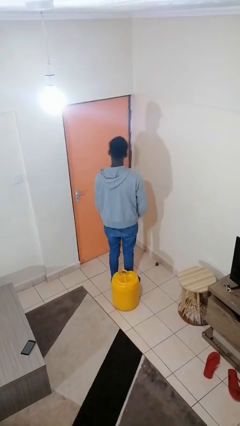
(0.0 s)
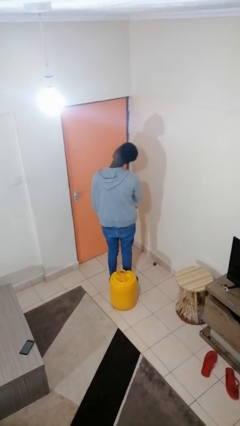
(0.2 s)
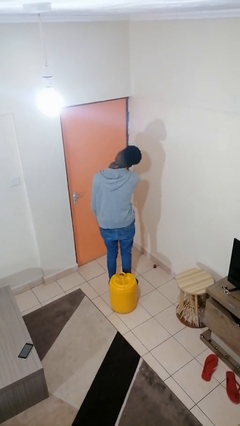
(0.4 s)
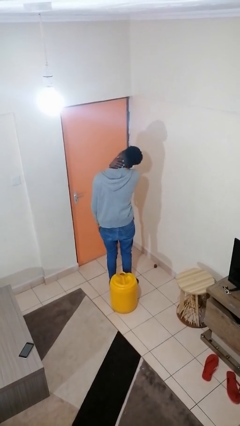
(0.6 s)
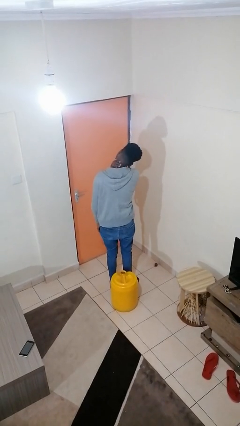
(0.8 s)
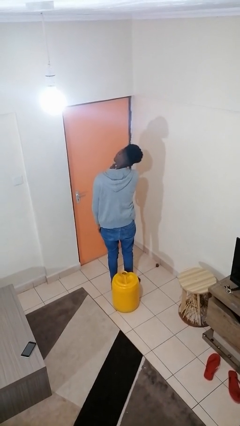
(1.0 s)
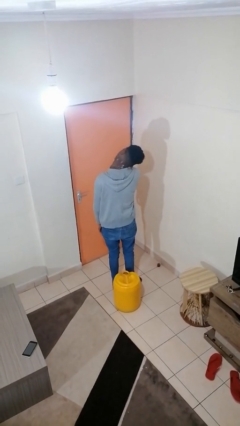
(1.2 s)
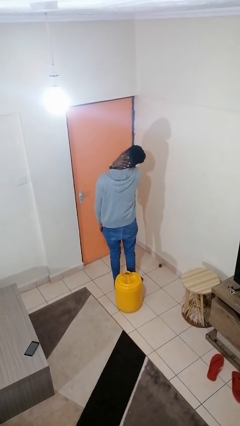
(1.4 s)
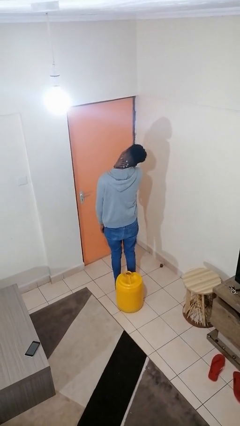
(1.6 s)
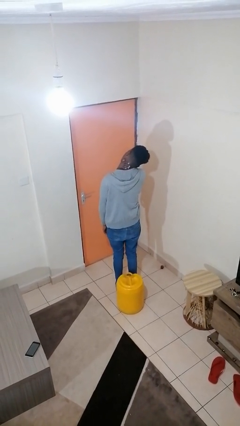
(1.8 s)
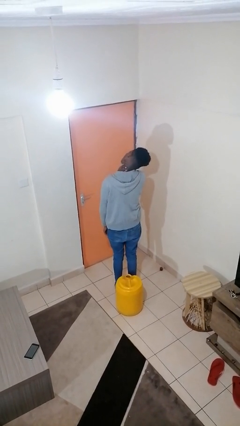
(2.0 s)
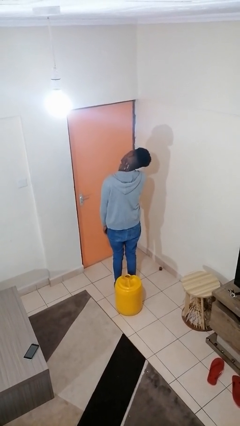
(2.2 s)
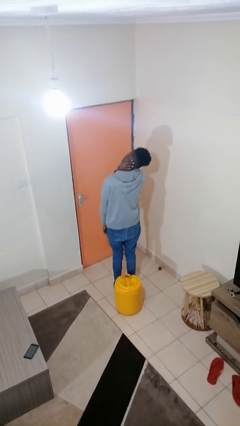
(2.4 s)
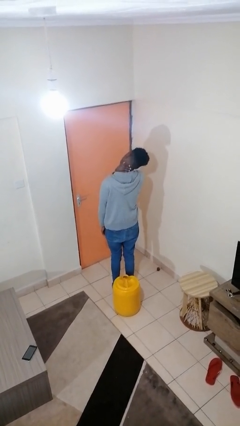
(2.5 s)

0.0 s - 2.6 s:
person rubs neck

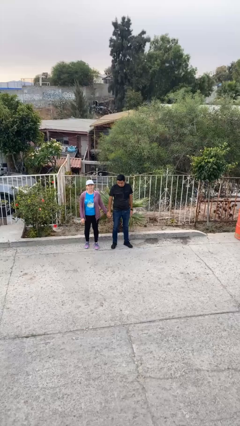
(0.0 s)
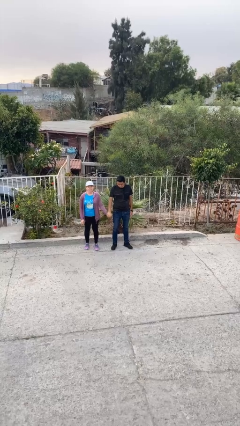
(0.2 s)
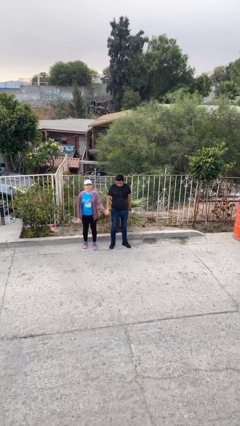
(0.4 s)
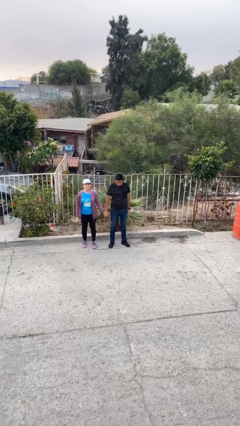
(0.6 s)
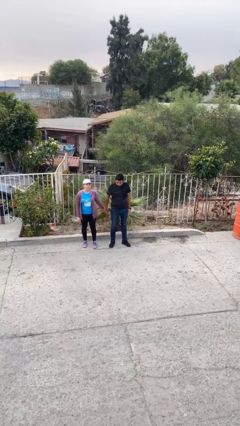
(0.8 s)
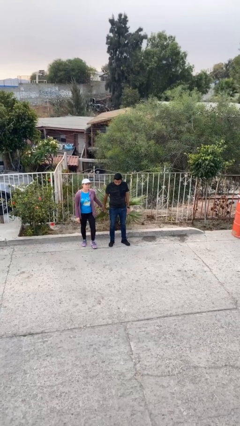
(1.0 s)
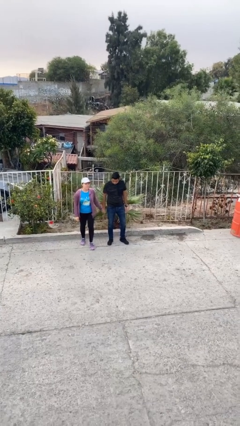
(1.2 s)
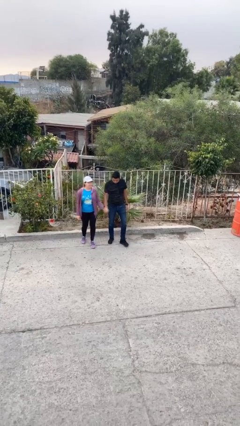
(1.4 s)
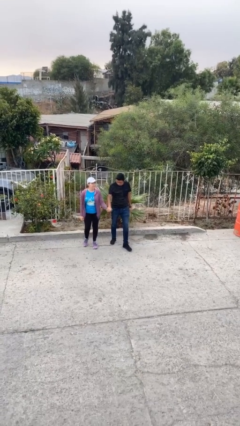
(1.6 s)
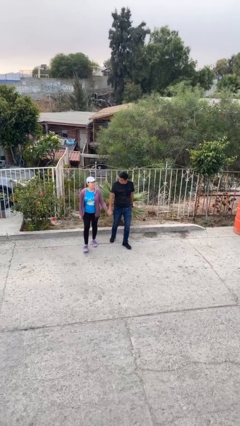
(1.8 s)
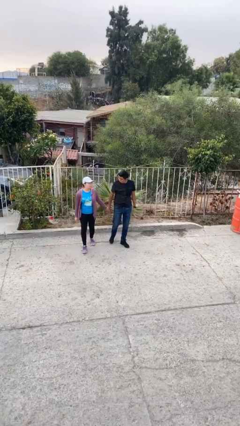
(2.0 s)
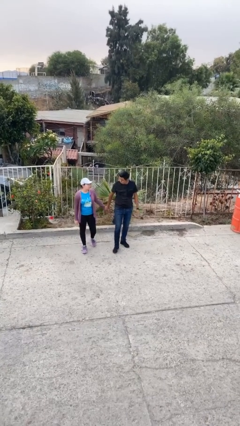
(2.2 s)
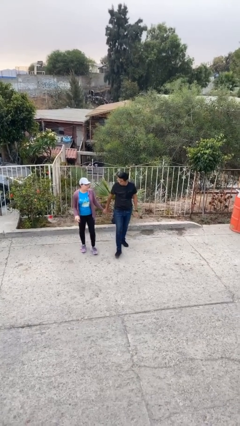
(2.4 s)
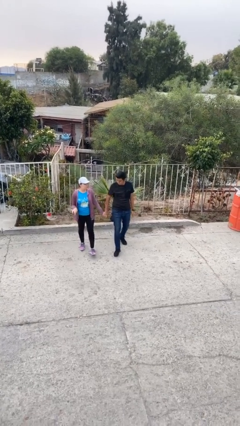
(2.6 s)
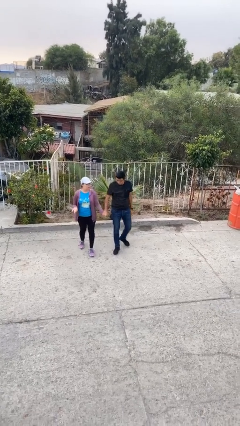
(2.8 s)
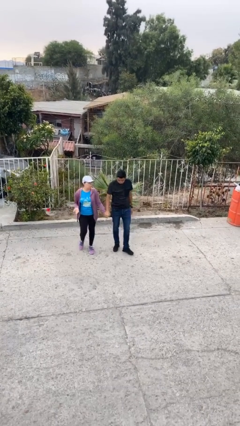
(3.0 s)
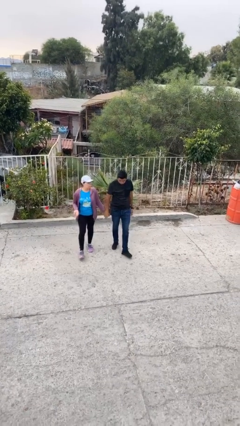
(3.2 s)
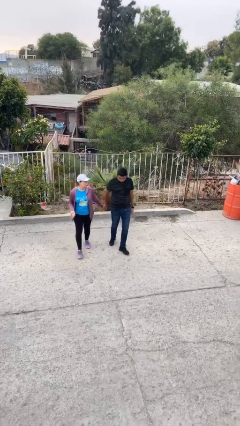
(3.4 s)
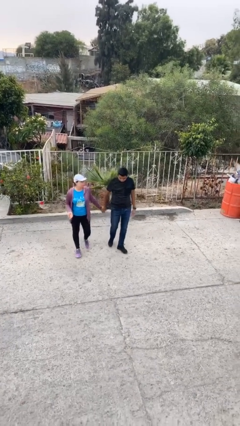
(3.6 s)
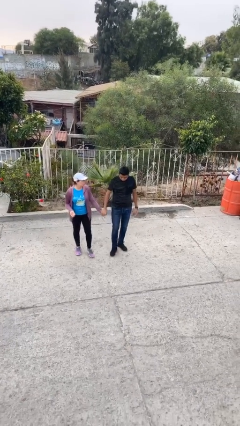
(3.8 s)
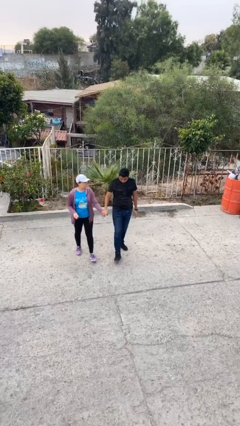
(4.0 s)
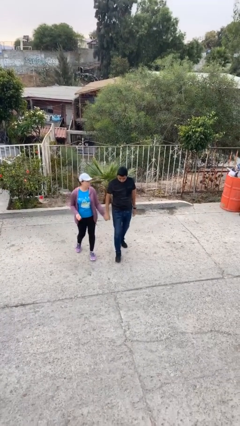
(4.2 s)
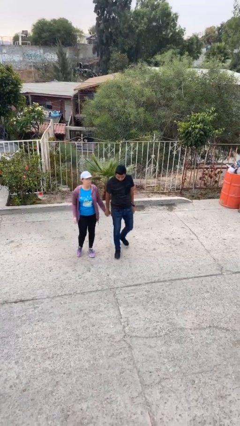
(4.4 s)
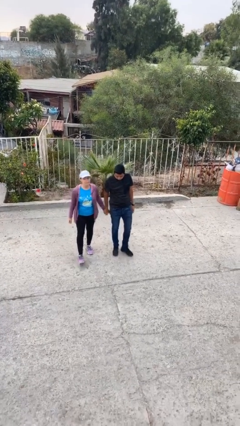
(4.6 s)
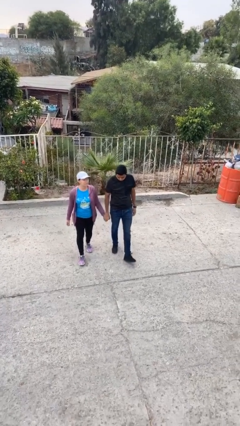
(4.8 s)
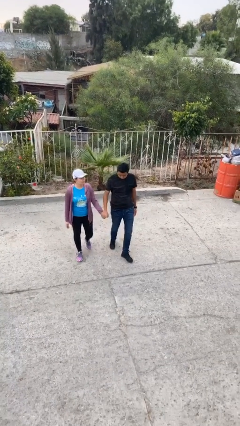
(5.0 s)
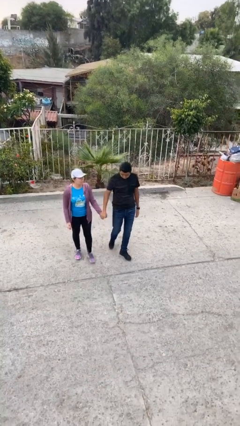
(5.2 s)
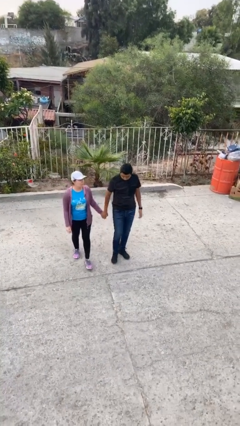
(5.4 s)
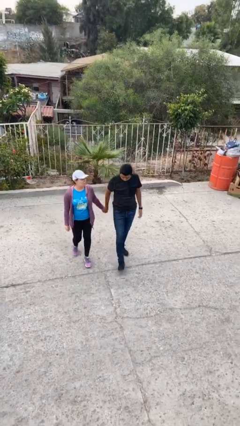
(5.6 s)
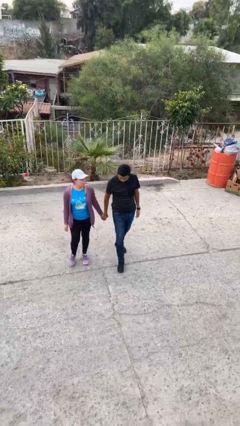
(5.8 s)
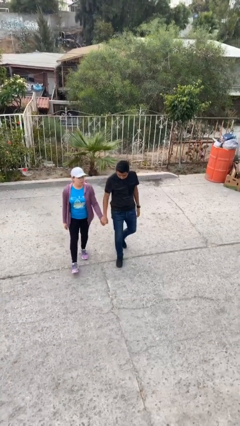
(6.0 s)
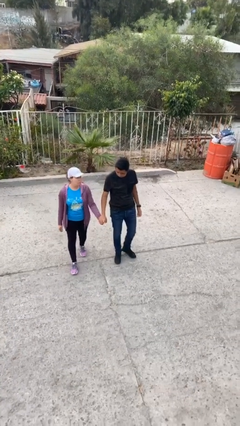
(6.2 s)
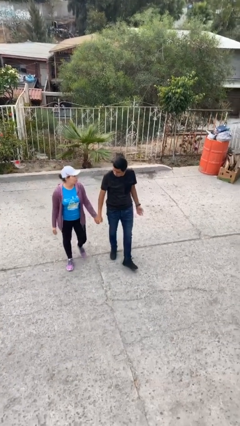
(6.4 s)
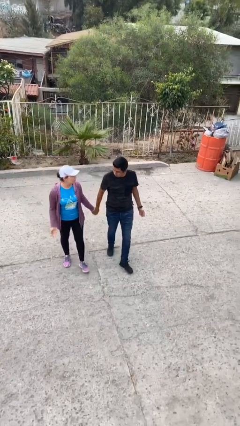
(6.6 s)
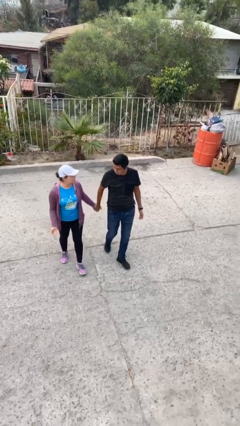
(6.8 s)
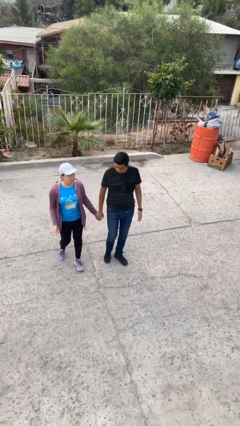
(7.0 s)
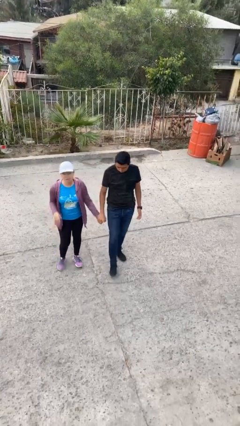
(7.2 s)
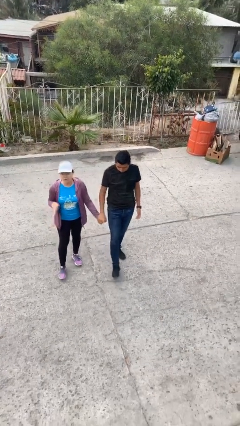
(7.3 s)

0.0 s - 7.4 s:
person holds hand

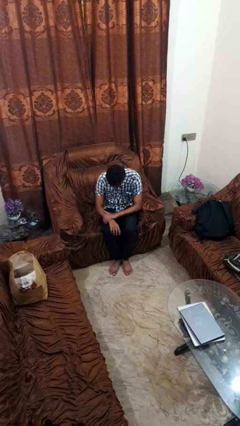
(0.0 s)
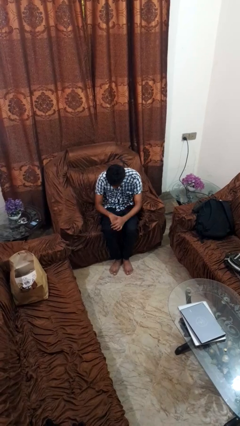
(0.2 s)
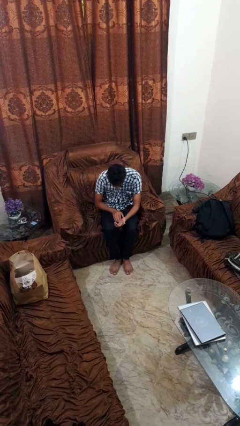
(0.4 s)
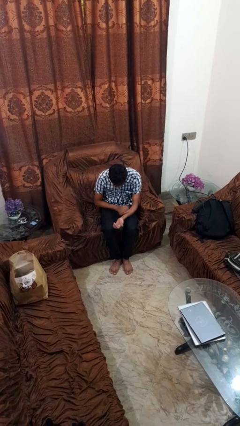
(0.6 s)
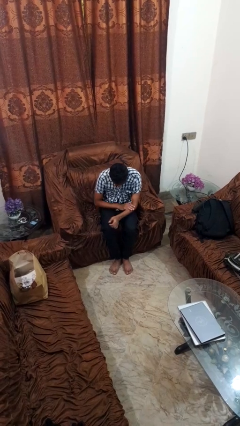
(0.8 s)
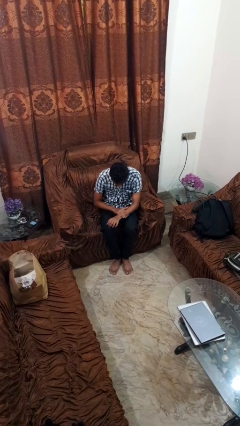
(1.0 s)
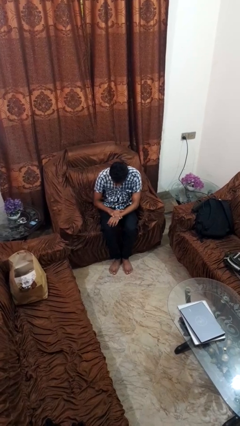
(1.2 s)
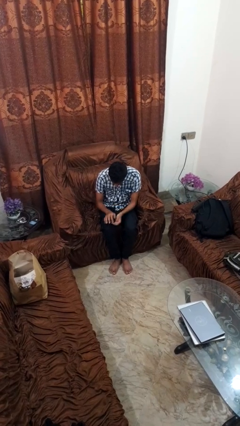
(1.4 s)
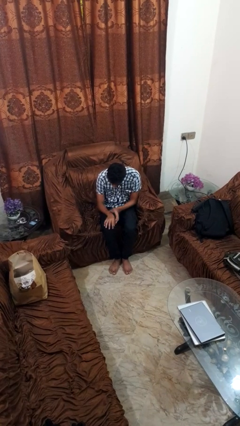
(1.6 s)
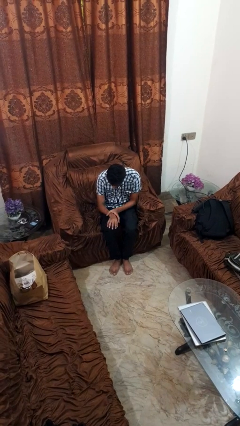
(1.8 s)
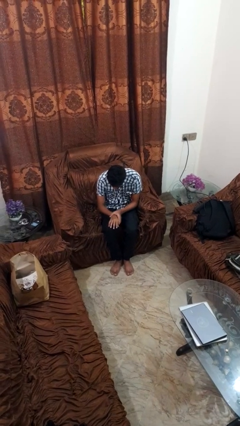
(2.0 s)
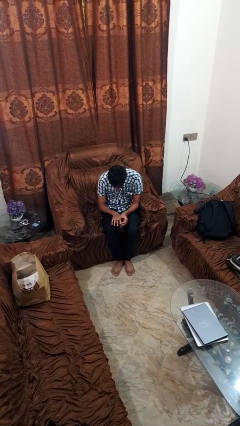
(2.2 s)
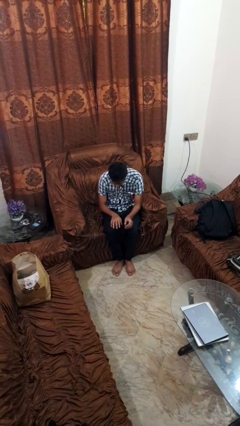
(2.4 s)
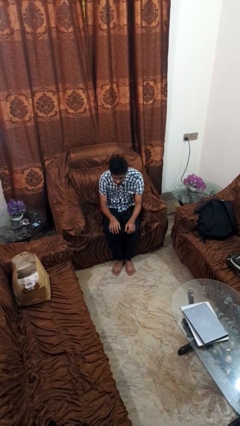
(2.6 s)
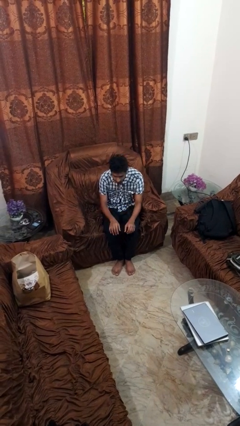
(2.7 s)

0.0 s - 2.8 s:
person looks at hands in lap

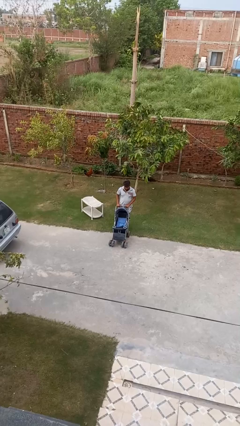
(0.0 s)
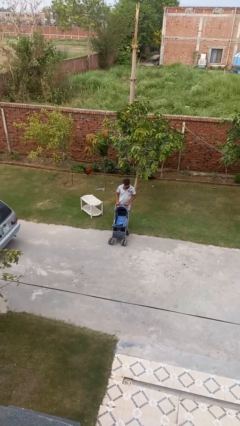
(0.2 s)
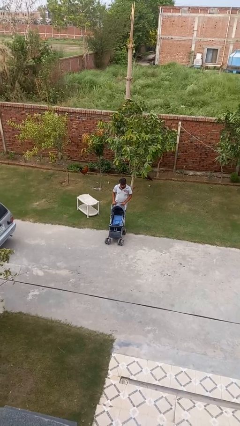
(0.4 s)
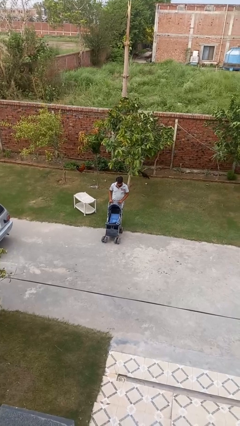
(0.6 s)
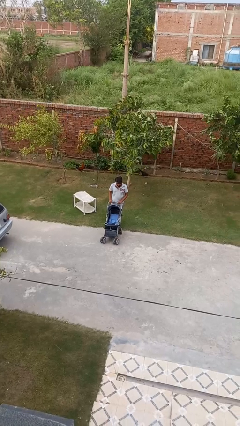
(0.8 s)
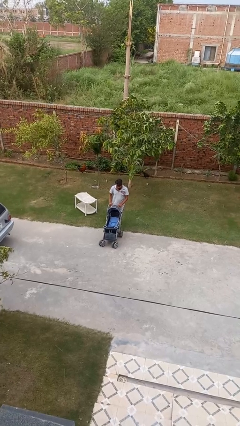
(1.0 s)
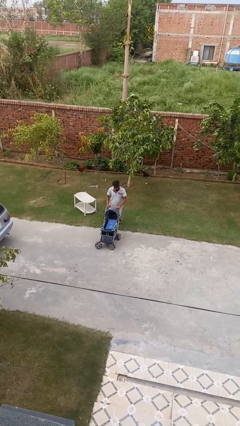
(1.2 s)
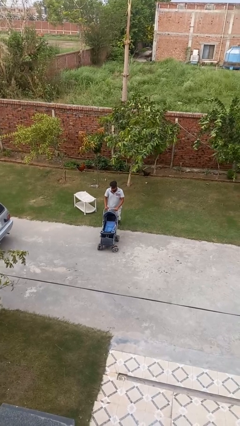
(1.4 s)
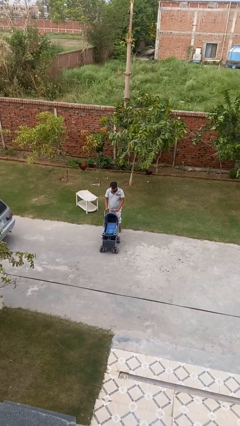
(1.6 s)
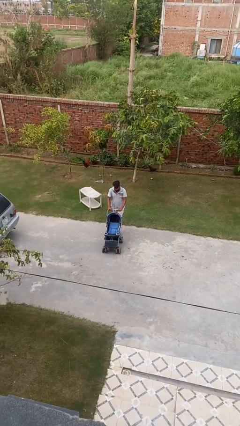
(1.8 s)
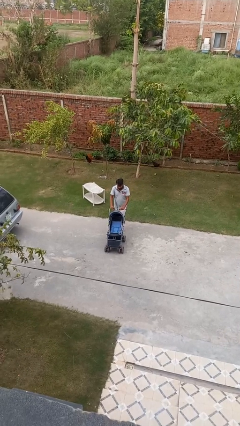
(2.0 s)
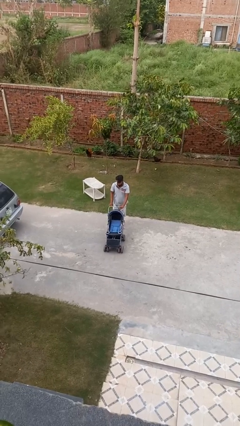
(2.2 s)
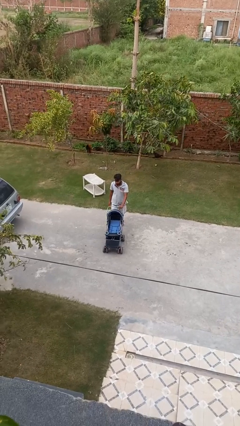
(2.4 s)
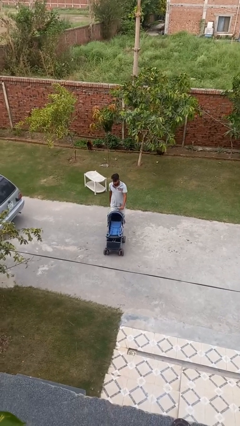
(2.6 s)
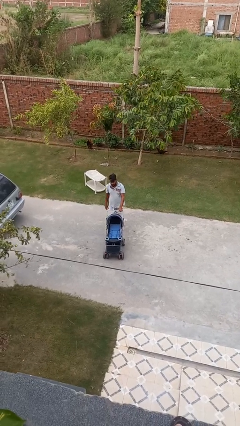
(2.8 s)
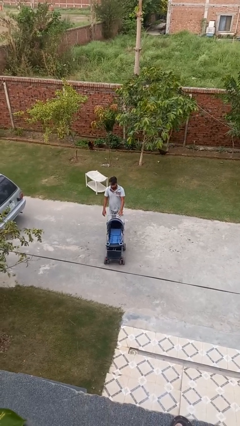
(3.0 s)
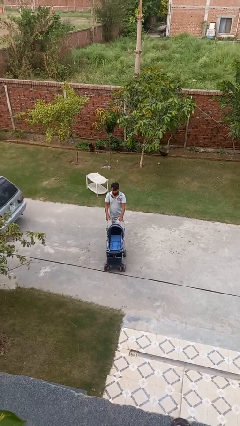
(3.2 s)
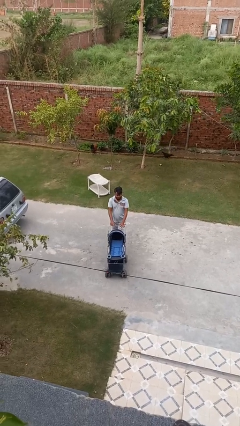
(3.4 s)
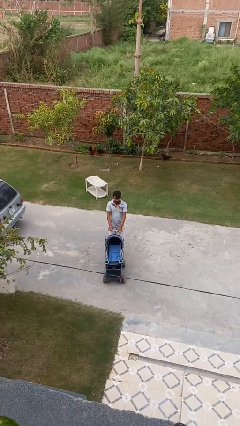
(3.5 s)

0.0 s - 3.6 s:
person pushes wheeled cart

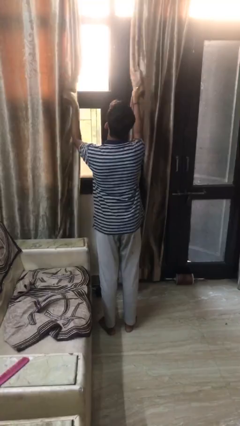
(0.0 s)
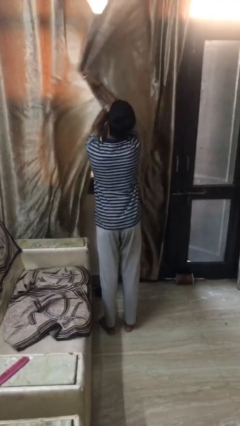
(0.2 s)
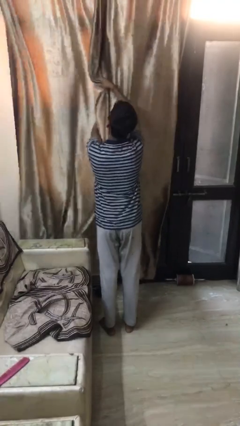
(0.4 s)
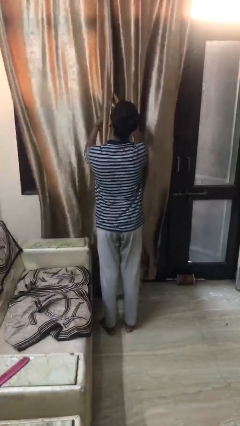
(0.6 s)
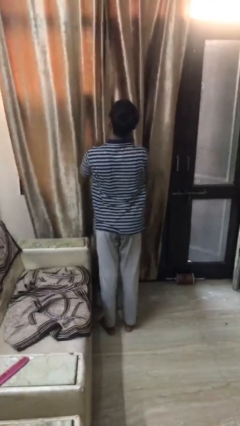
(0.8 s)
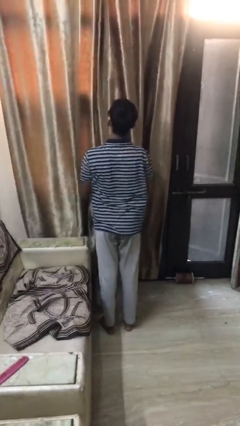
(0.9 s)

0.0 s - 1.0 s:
person closes curtains
